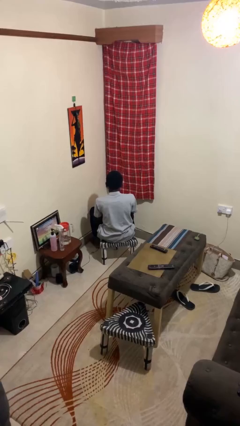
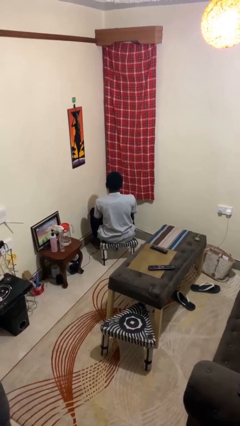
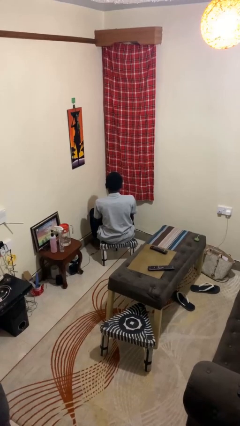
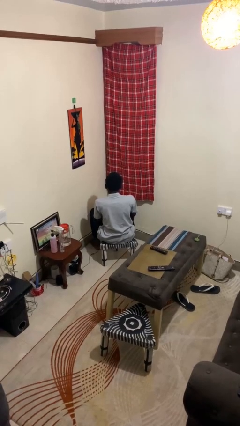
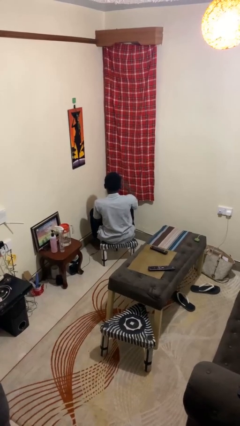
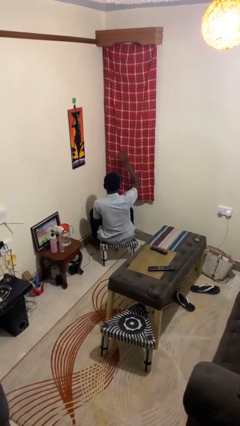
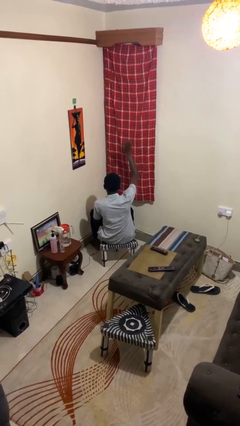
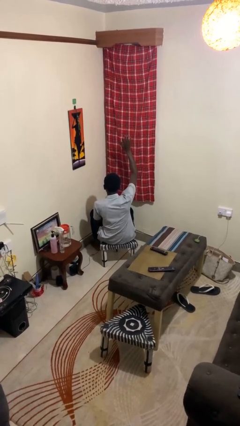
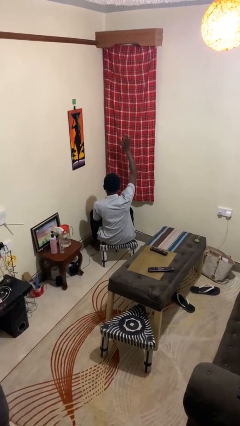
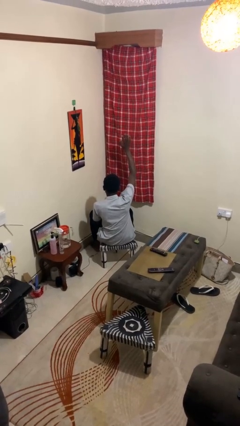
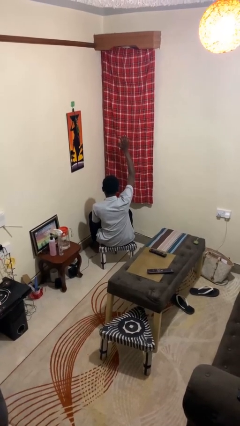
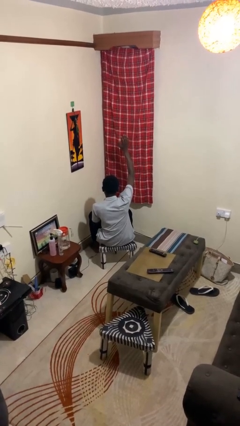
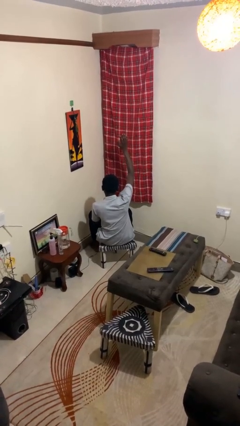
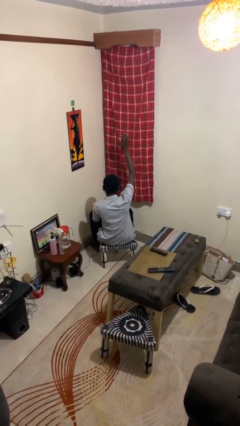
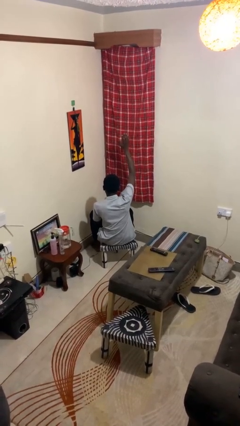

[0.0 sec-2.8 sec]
person gestures raise hand

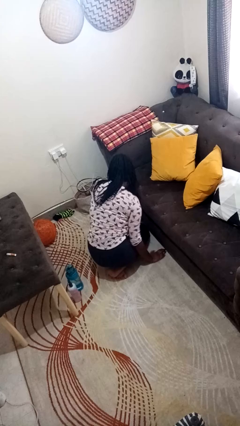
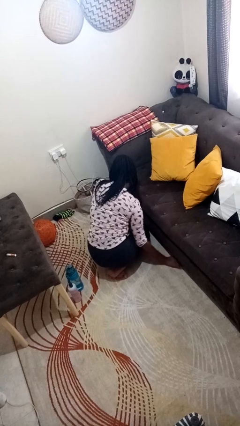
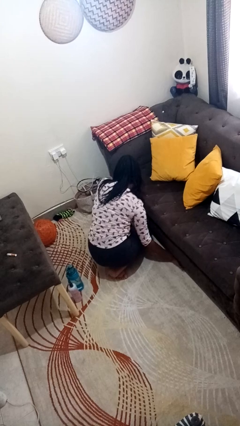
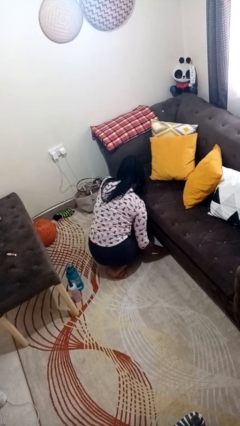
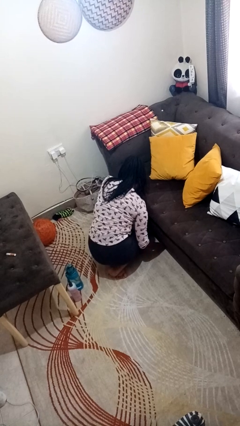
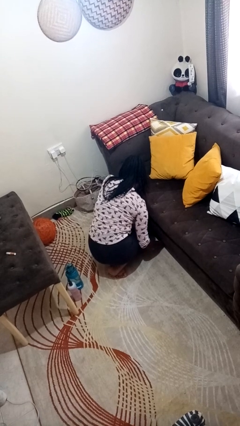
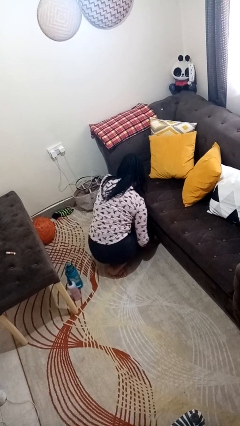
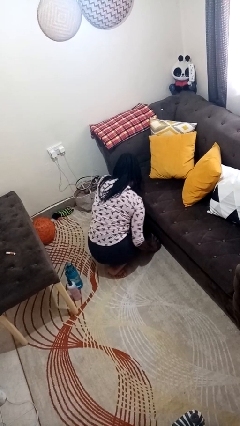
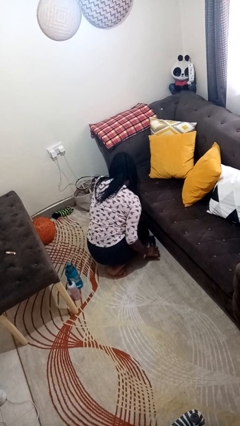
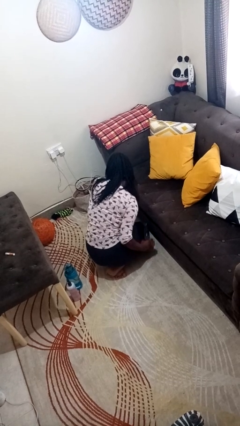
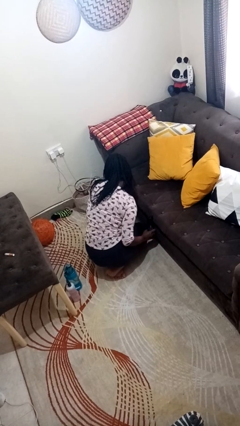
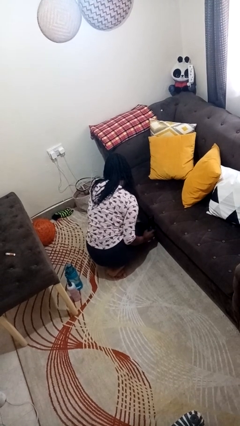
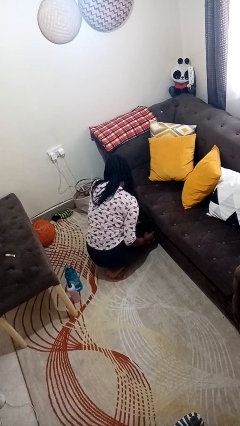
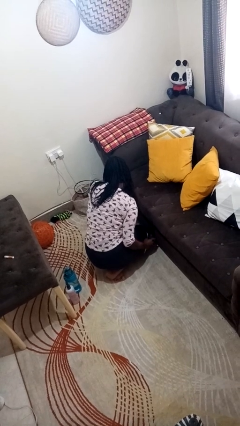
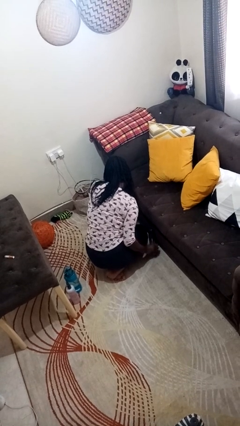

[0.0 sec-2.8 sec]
person searches under couch

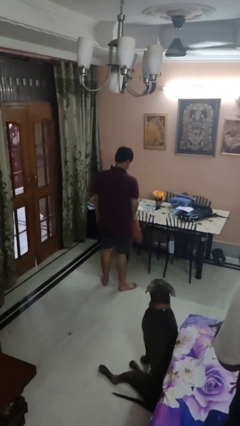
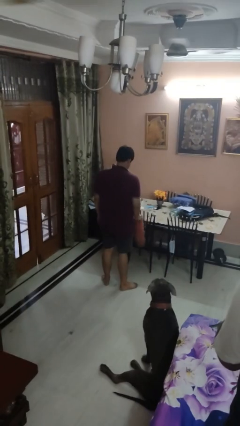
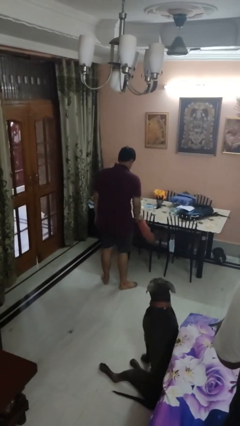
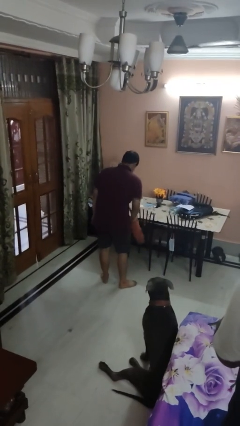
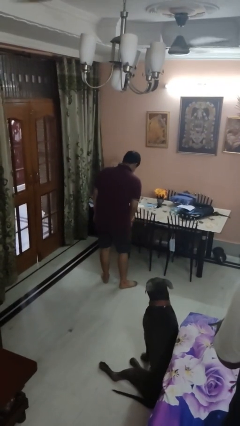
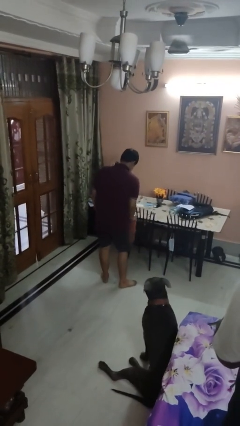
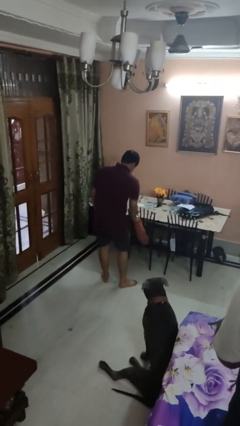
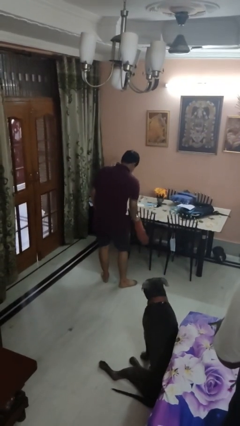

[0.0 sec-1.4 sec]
person dusts furniture

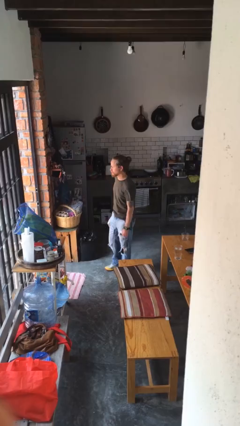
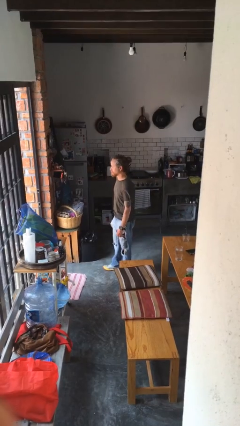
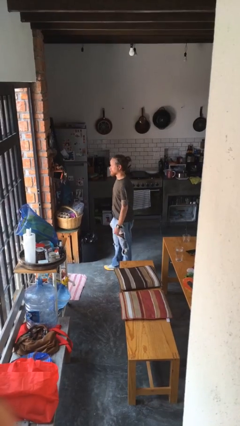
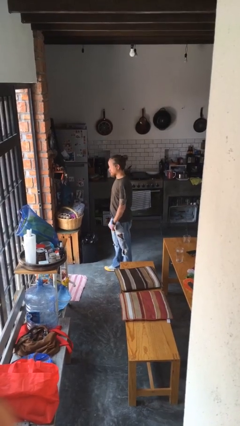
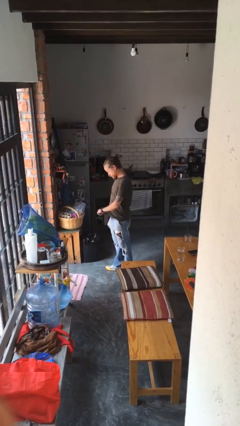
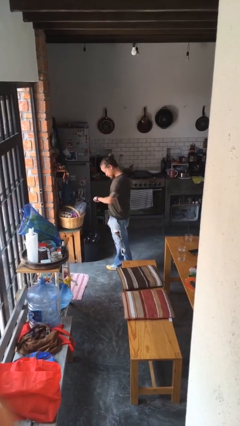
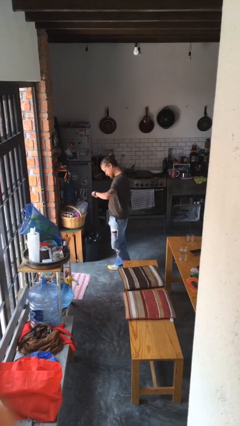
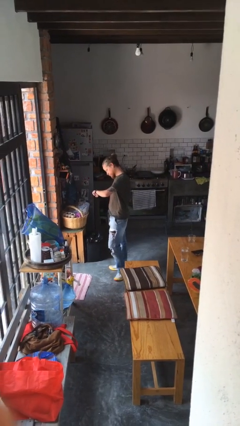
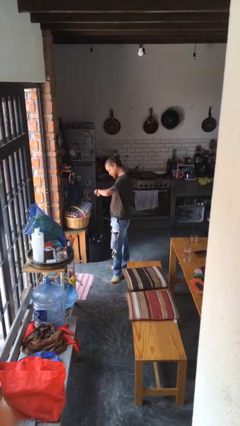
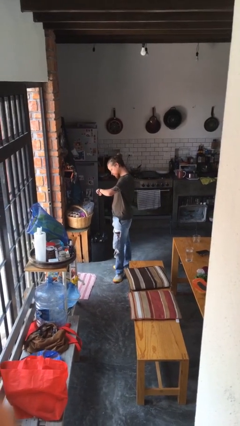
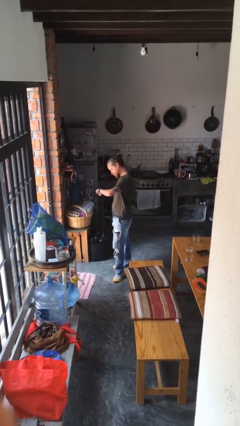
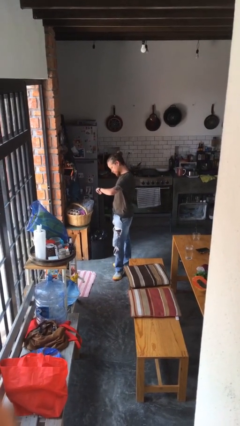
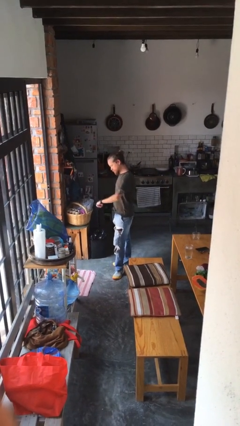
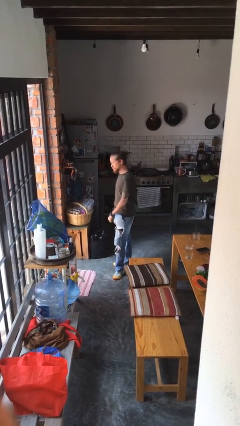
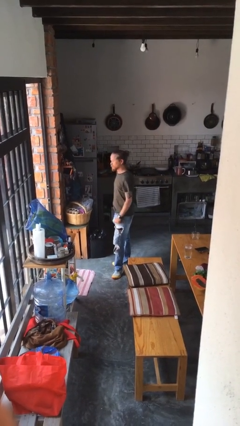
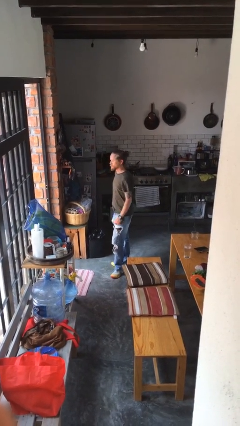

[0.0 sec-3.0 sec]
person looks at wristwatch

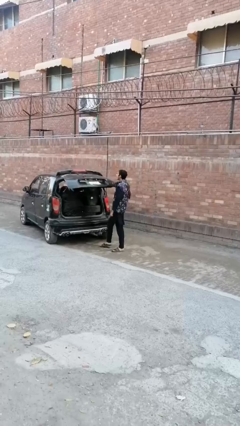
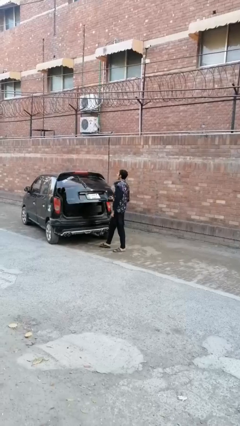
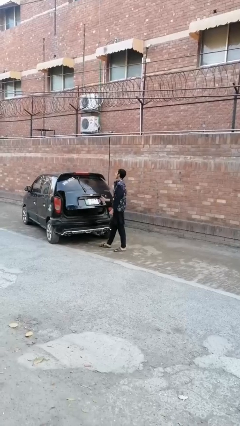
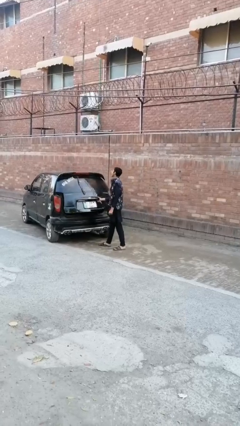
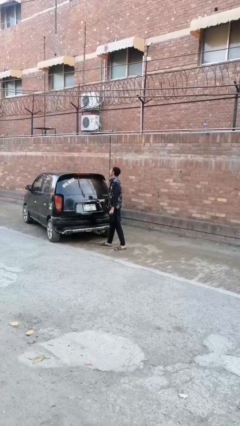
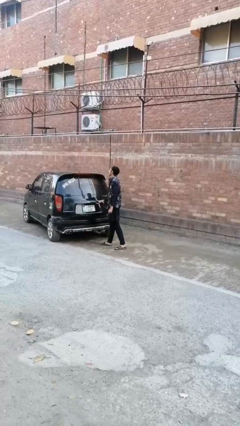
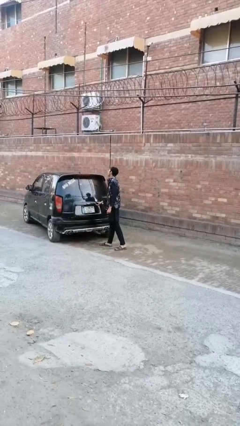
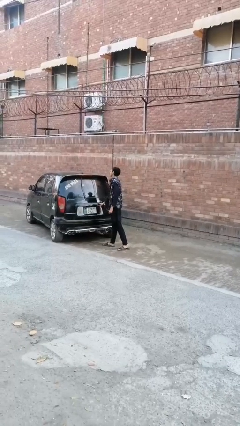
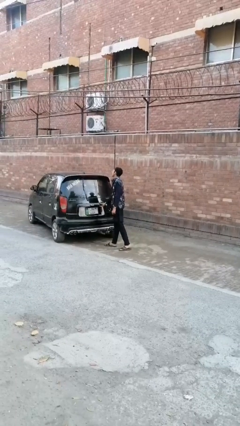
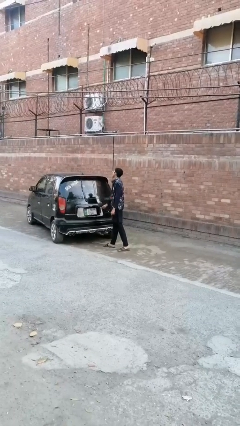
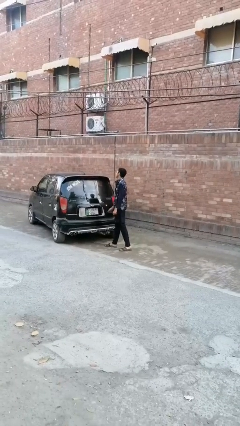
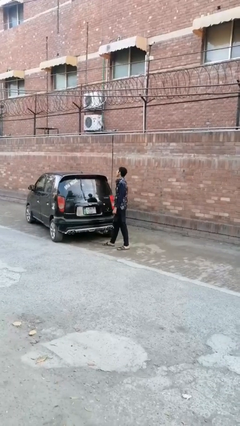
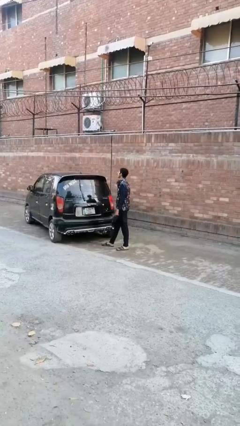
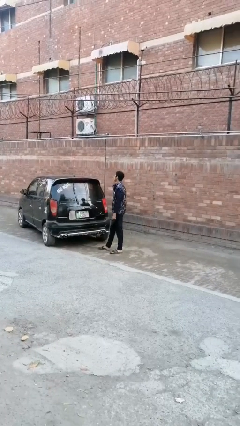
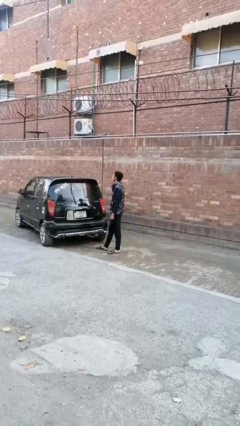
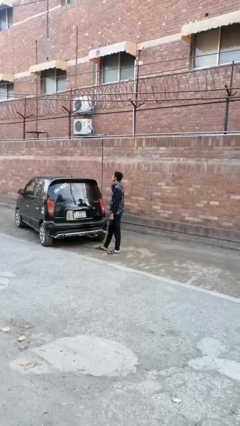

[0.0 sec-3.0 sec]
person closes car trunk

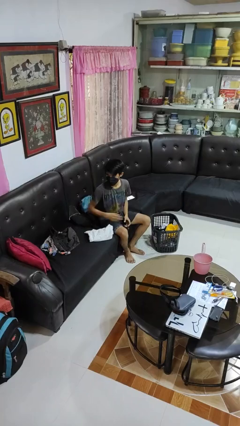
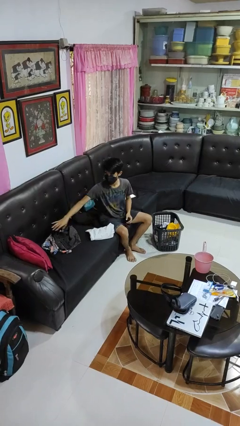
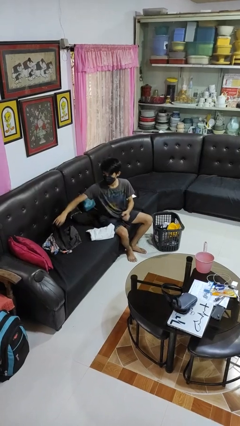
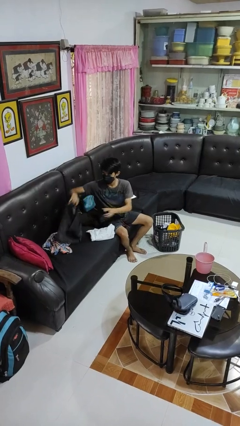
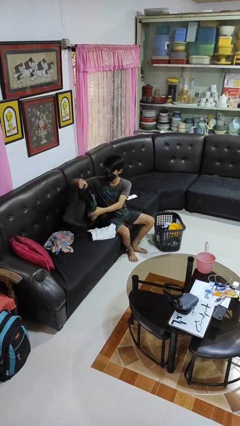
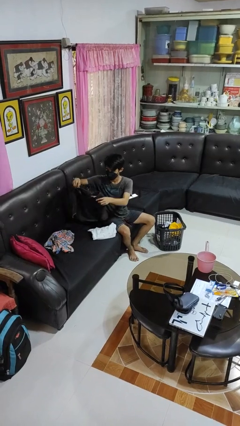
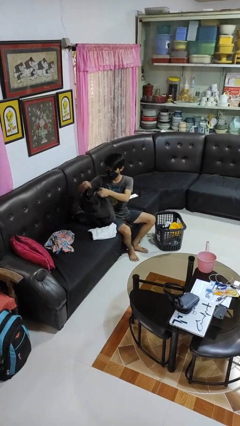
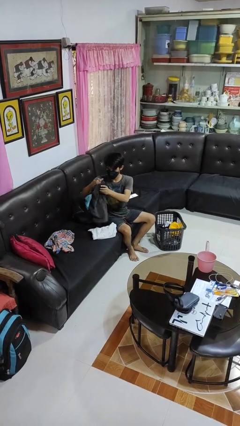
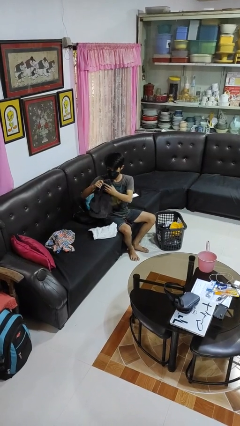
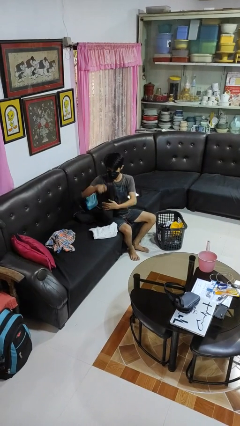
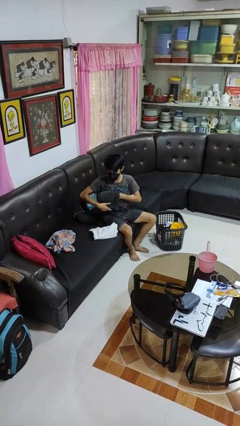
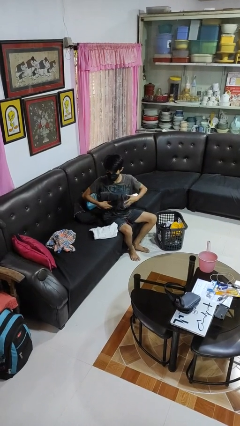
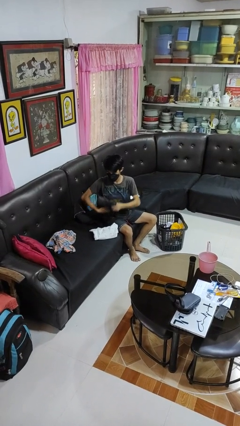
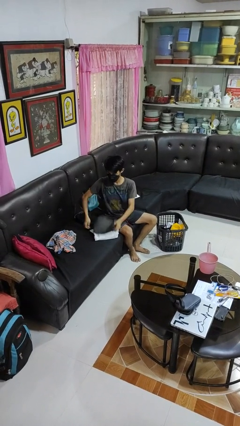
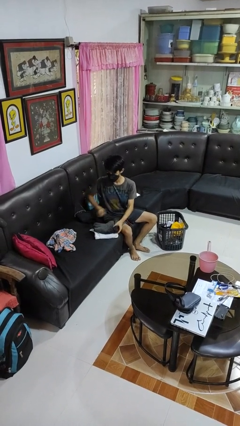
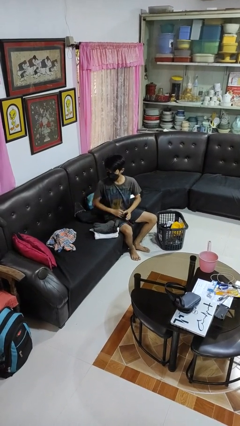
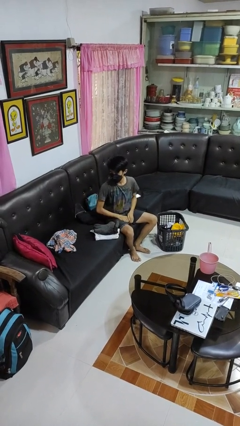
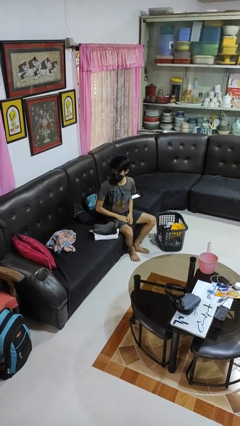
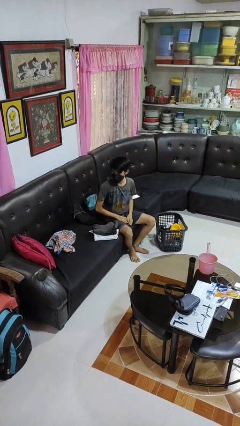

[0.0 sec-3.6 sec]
person folds pants

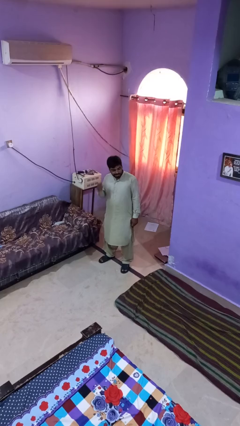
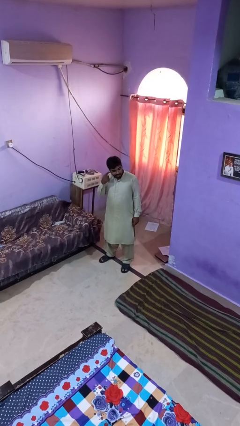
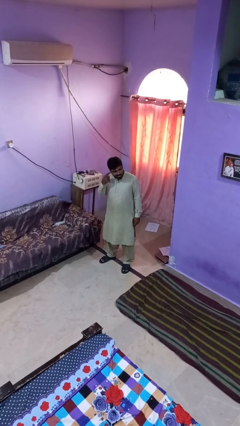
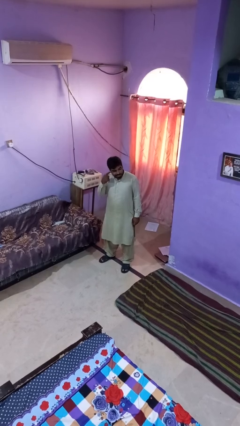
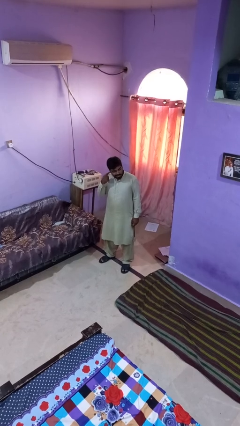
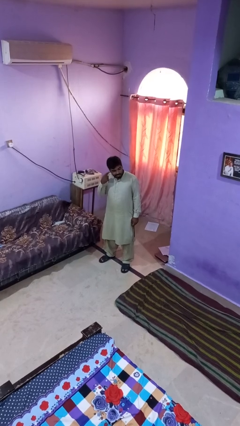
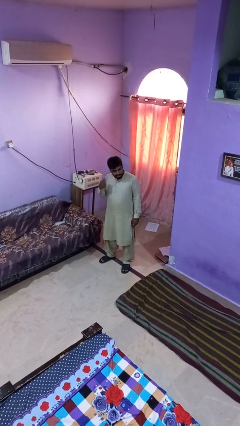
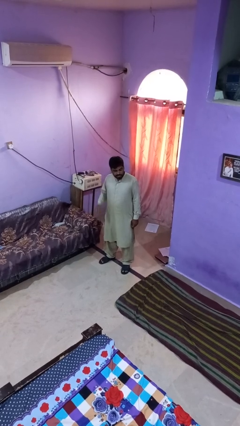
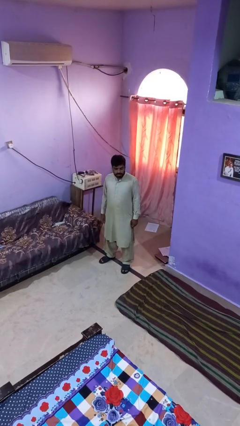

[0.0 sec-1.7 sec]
person gestures listen closely
